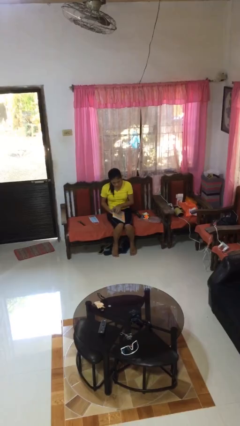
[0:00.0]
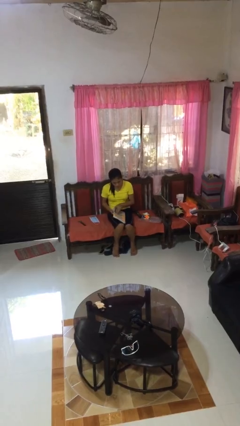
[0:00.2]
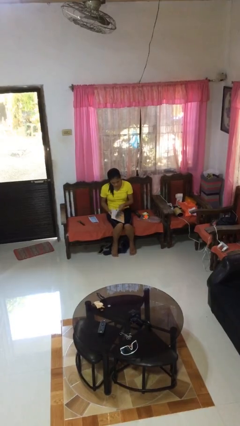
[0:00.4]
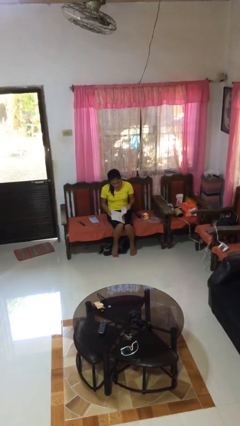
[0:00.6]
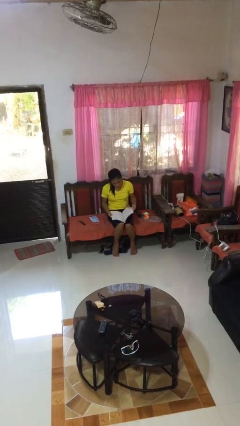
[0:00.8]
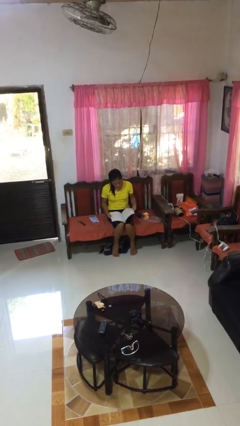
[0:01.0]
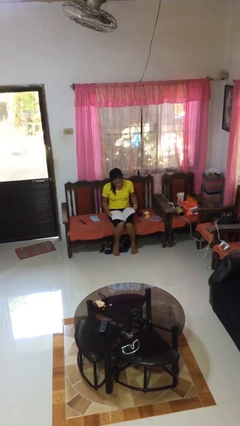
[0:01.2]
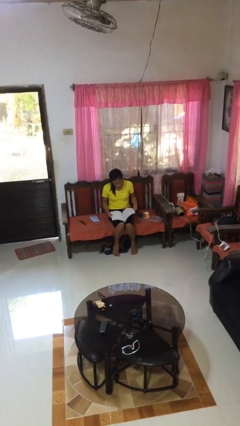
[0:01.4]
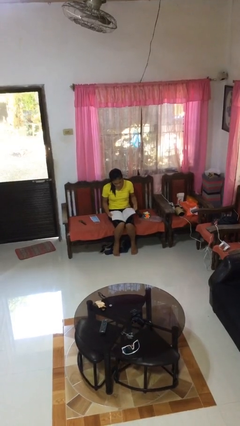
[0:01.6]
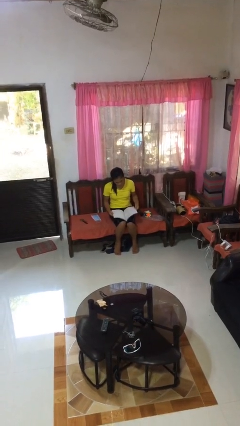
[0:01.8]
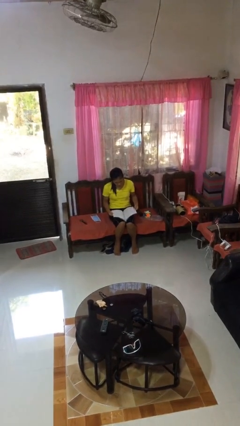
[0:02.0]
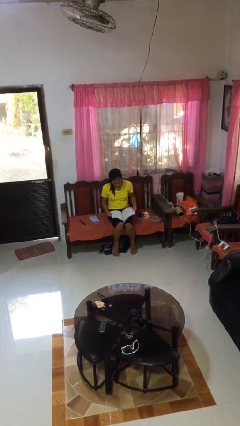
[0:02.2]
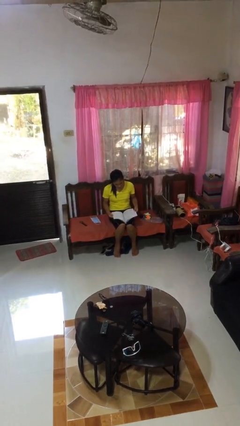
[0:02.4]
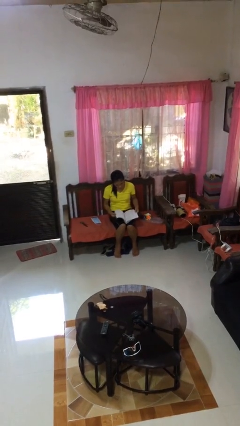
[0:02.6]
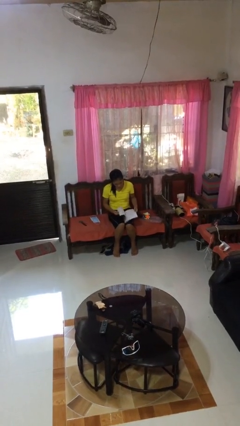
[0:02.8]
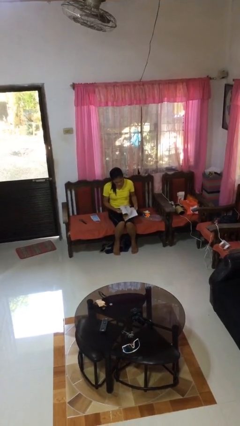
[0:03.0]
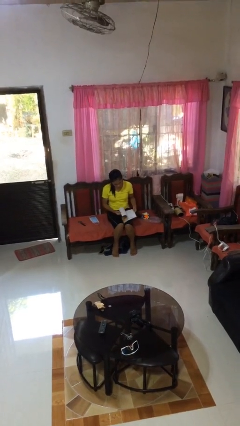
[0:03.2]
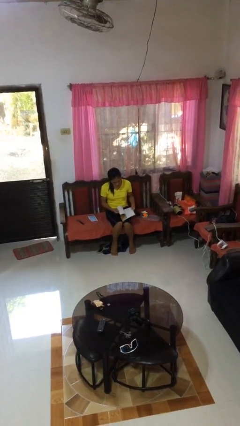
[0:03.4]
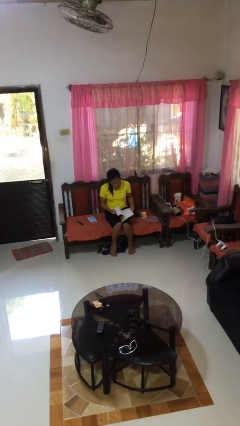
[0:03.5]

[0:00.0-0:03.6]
person reads book

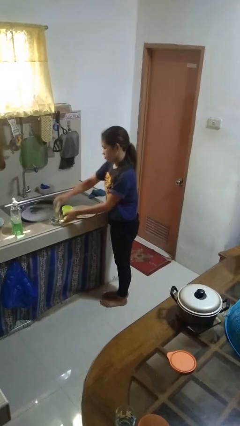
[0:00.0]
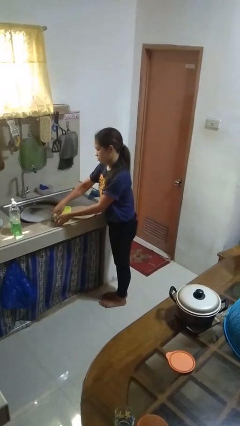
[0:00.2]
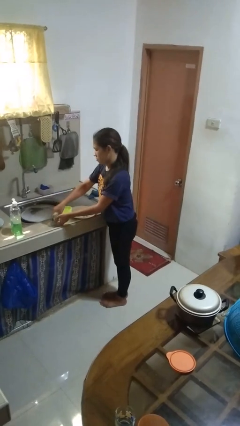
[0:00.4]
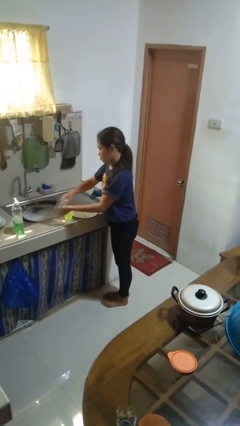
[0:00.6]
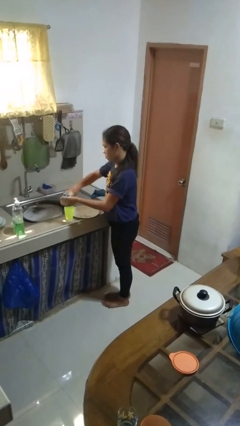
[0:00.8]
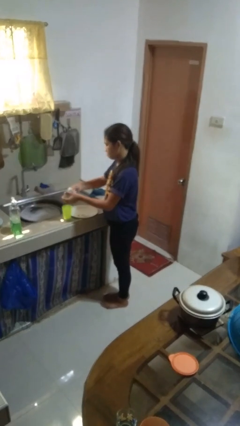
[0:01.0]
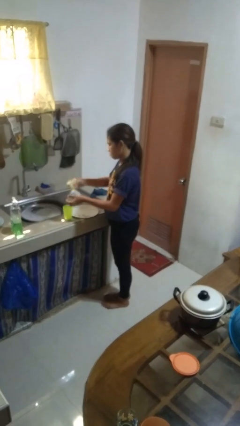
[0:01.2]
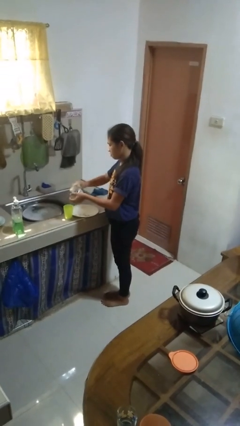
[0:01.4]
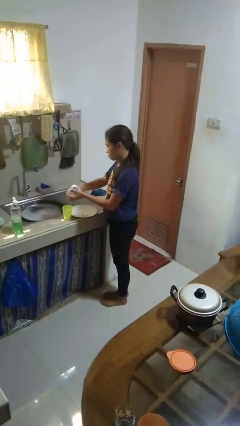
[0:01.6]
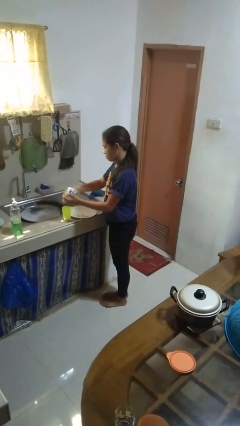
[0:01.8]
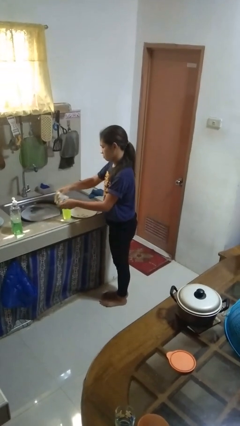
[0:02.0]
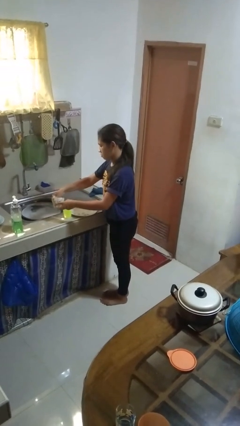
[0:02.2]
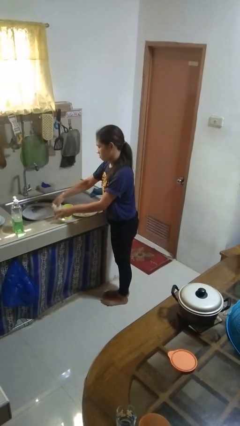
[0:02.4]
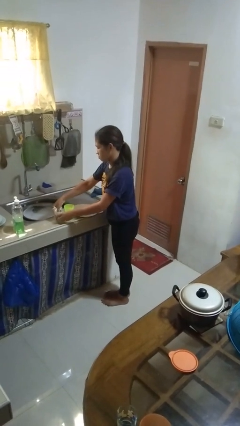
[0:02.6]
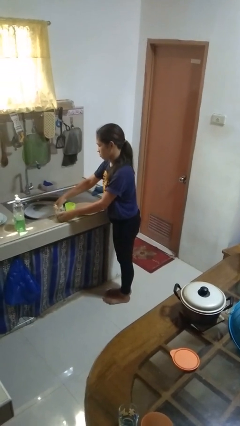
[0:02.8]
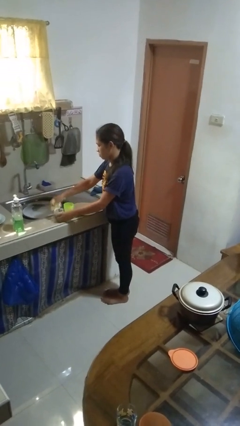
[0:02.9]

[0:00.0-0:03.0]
person washes dish

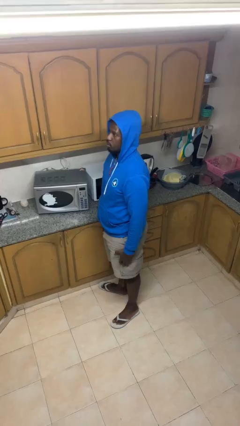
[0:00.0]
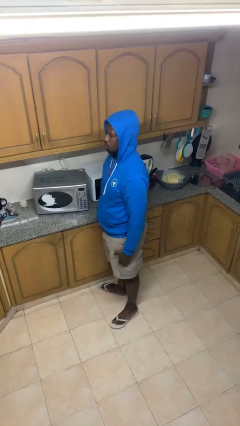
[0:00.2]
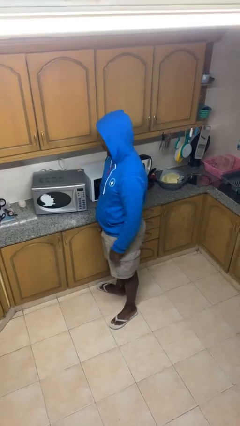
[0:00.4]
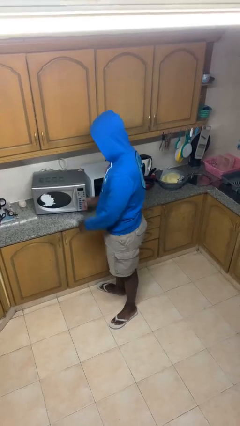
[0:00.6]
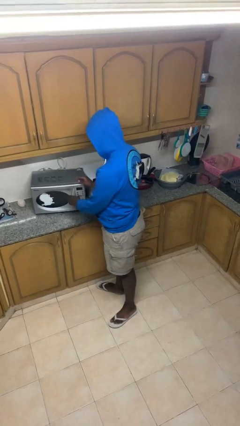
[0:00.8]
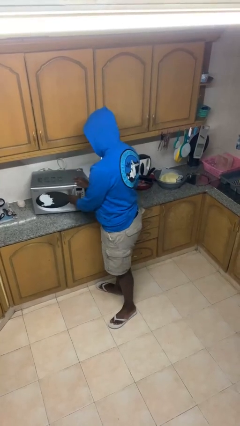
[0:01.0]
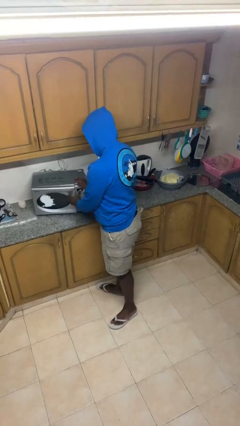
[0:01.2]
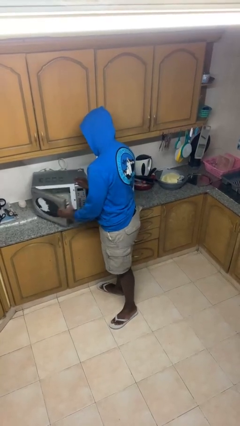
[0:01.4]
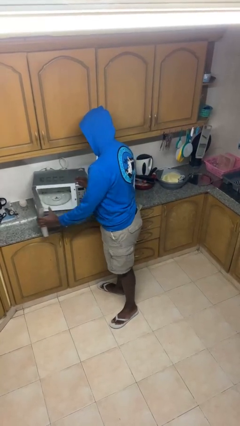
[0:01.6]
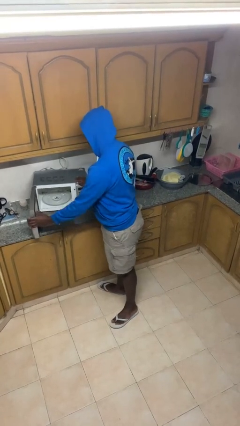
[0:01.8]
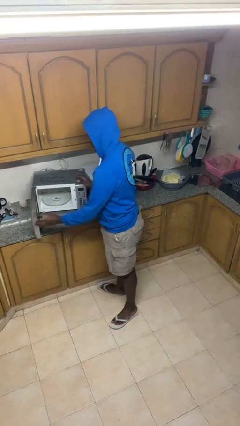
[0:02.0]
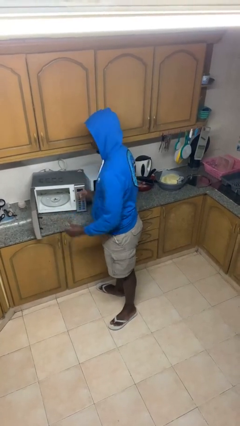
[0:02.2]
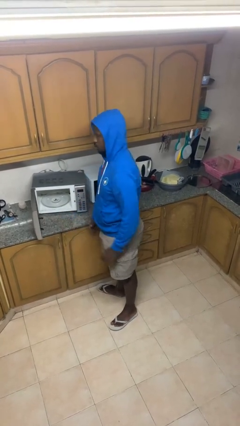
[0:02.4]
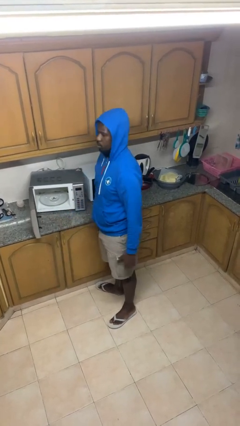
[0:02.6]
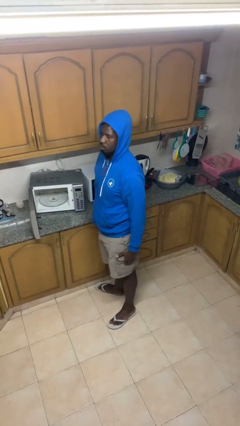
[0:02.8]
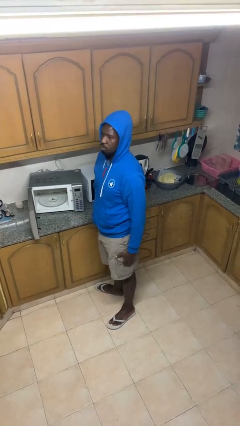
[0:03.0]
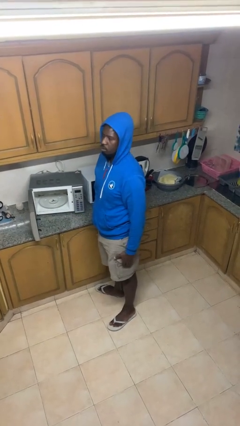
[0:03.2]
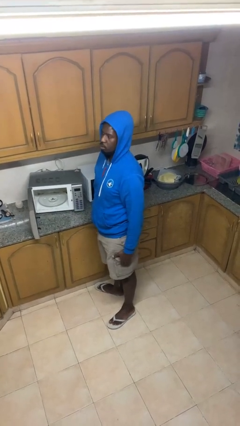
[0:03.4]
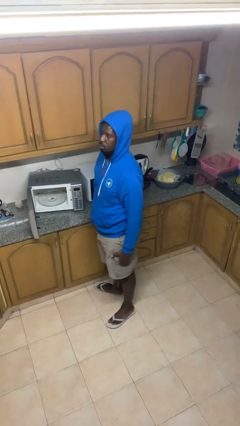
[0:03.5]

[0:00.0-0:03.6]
person opens microwave

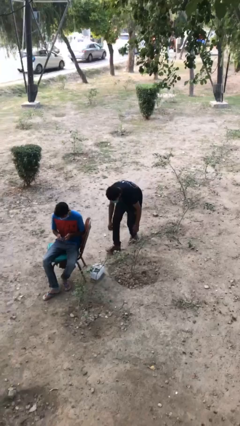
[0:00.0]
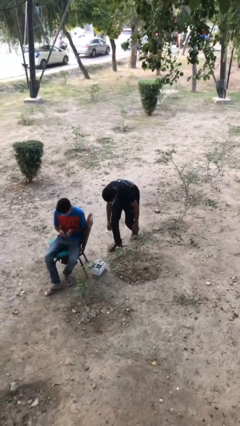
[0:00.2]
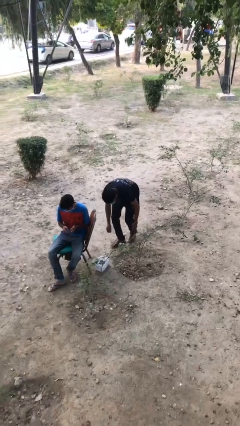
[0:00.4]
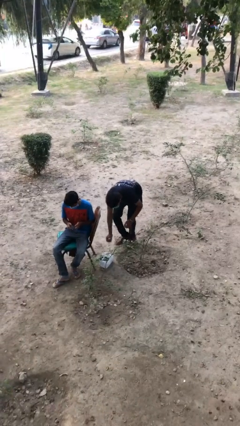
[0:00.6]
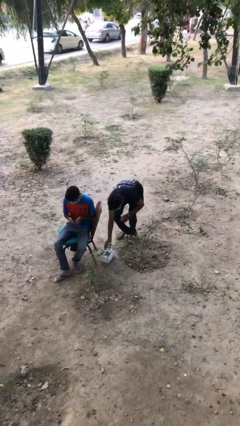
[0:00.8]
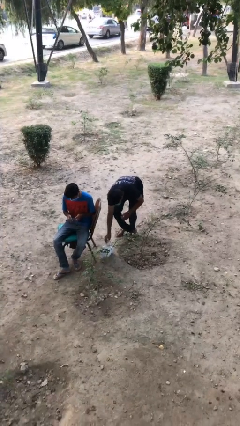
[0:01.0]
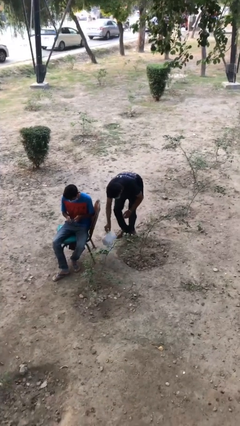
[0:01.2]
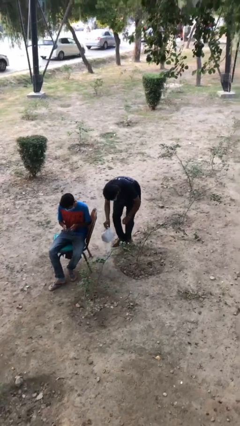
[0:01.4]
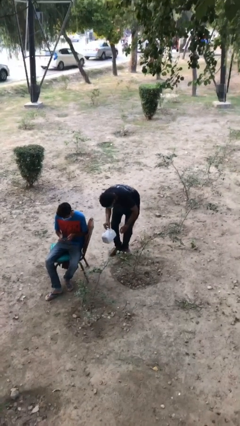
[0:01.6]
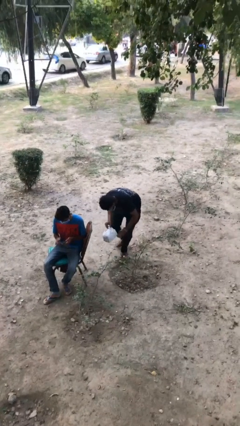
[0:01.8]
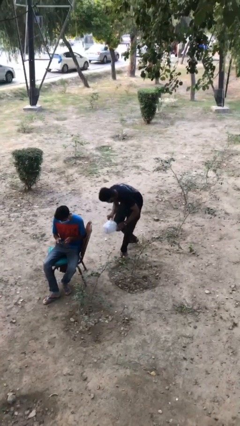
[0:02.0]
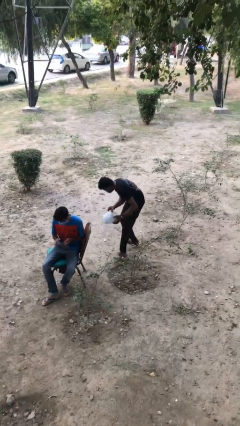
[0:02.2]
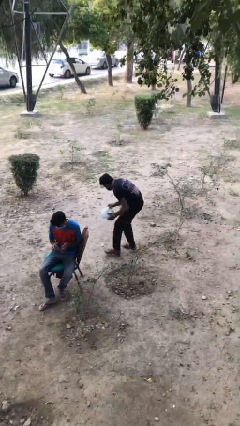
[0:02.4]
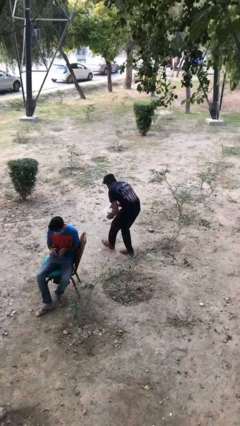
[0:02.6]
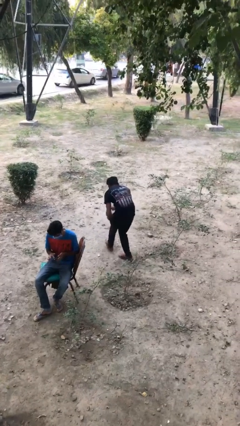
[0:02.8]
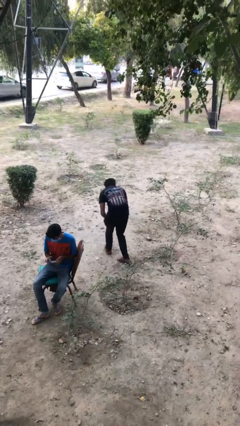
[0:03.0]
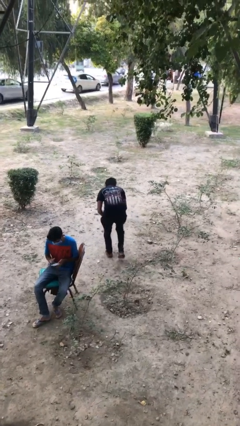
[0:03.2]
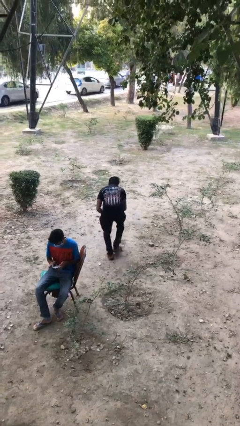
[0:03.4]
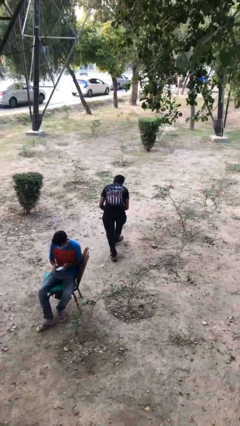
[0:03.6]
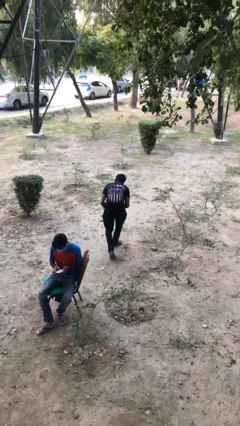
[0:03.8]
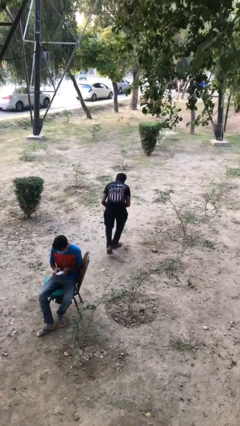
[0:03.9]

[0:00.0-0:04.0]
person steals object from person

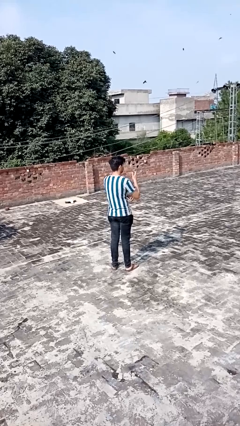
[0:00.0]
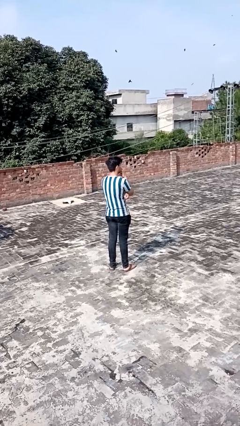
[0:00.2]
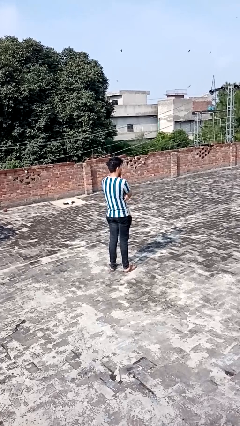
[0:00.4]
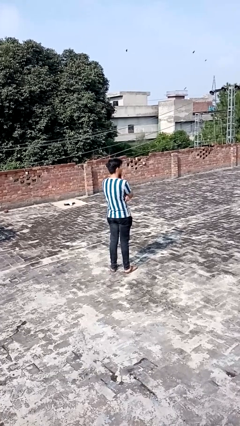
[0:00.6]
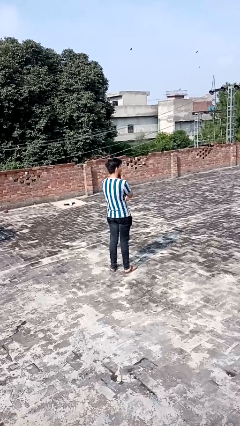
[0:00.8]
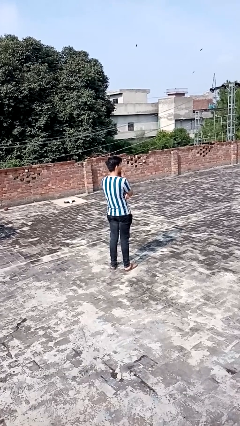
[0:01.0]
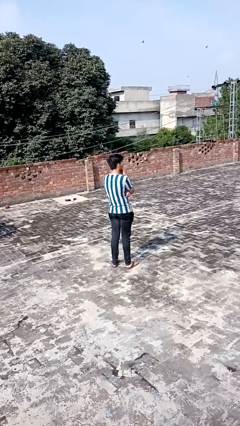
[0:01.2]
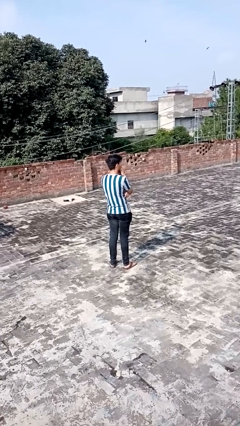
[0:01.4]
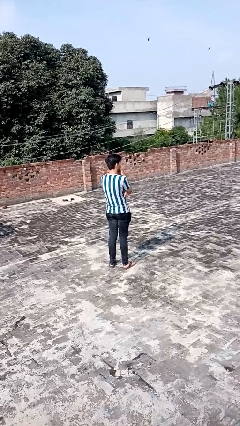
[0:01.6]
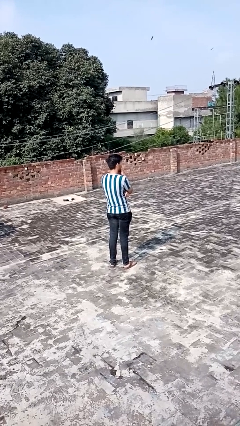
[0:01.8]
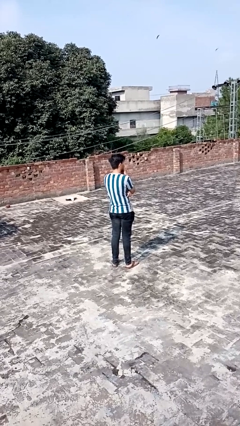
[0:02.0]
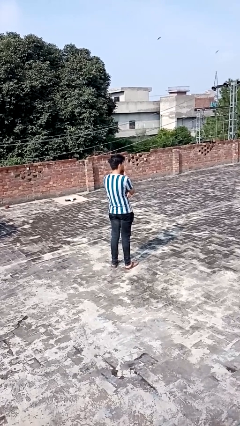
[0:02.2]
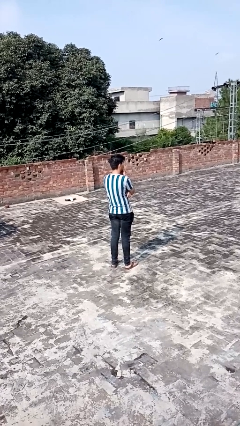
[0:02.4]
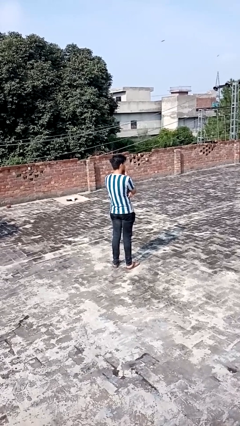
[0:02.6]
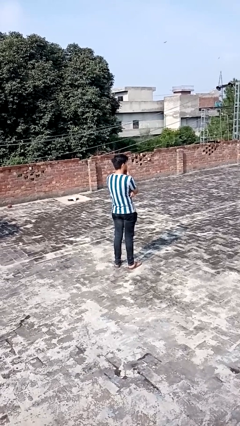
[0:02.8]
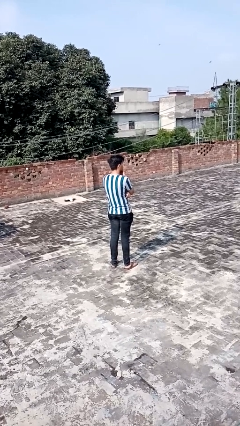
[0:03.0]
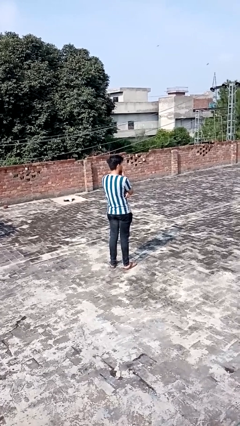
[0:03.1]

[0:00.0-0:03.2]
person strokes chin
